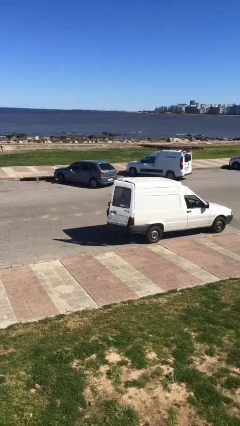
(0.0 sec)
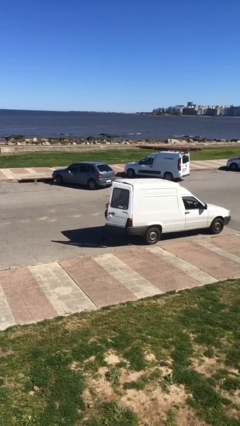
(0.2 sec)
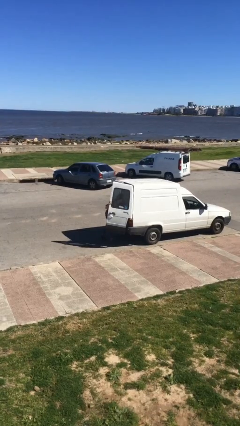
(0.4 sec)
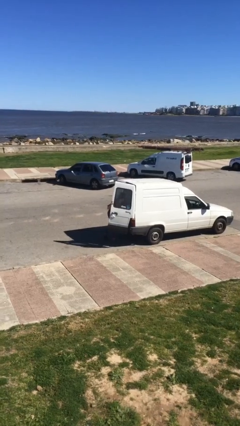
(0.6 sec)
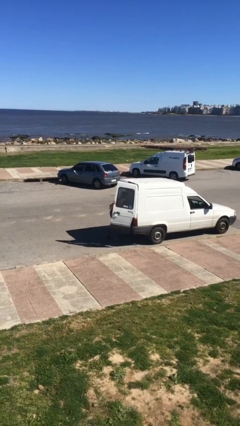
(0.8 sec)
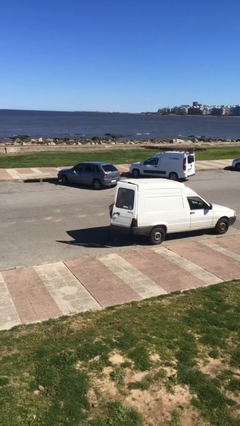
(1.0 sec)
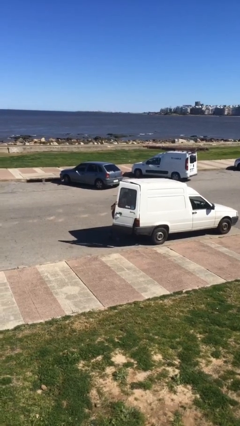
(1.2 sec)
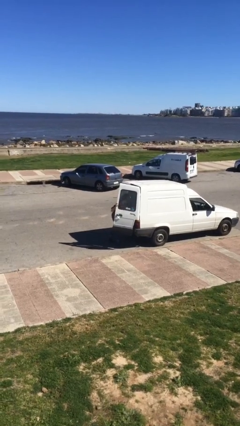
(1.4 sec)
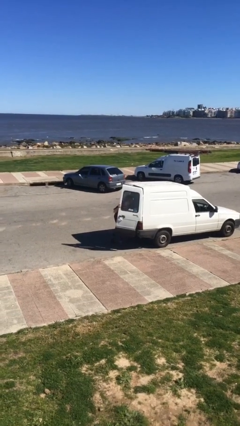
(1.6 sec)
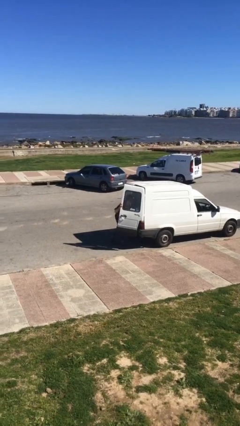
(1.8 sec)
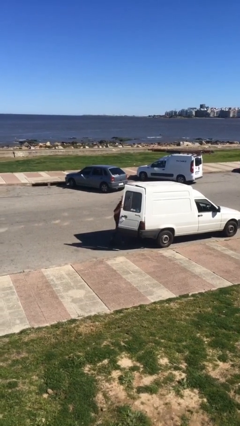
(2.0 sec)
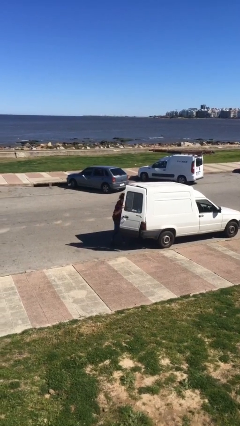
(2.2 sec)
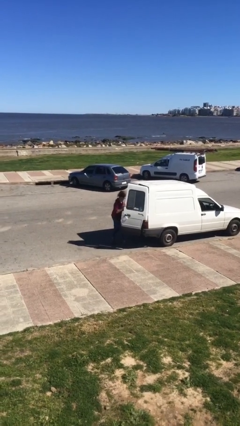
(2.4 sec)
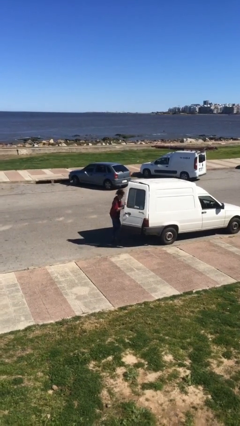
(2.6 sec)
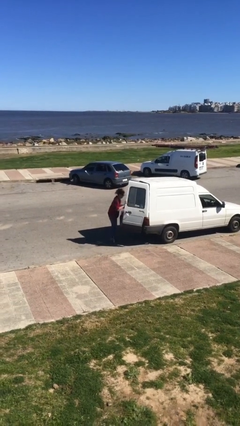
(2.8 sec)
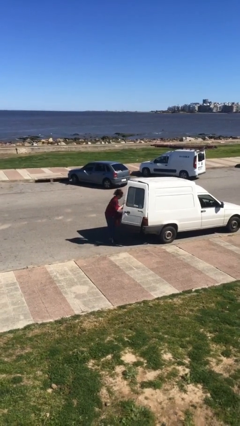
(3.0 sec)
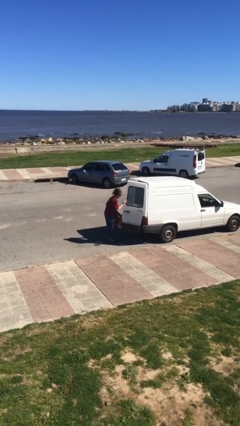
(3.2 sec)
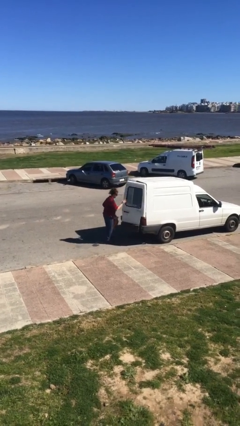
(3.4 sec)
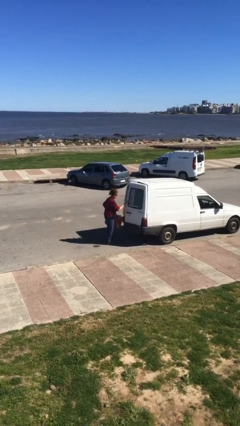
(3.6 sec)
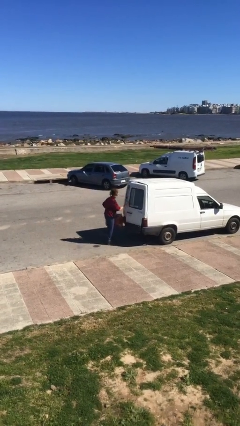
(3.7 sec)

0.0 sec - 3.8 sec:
person unloads car

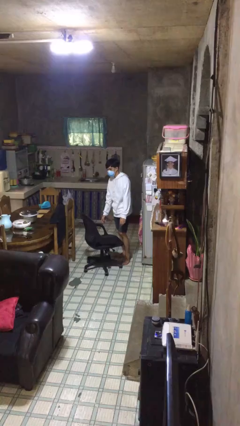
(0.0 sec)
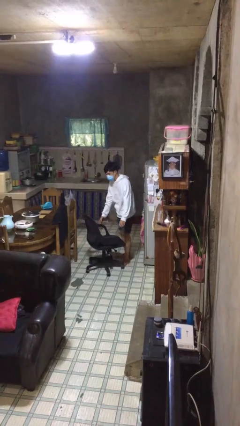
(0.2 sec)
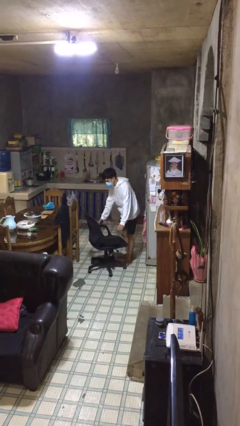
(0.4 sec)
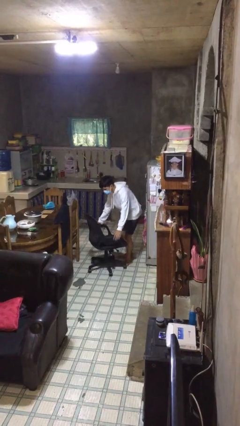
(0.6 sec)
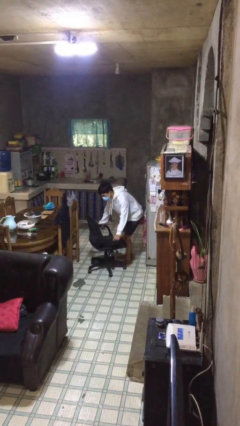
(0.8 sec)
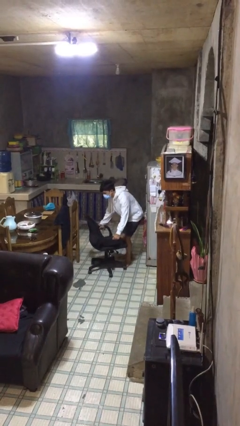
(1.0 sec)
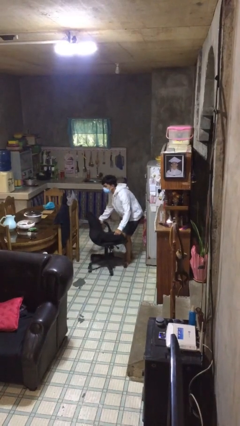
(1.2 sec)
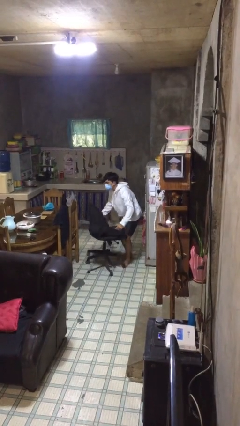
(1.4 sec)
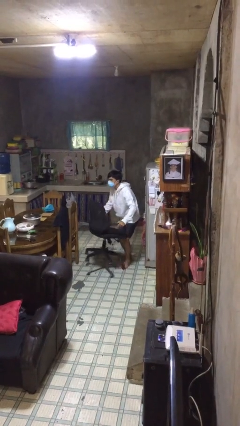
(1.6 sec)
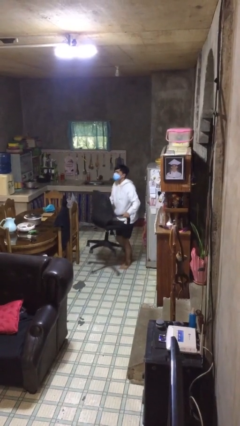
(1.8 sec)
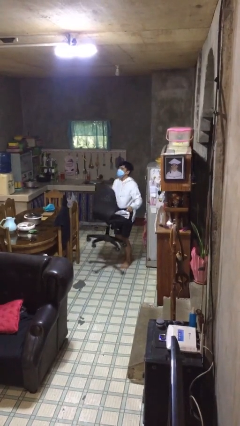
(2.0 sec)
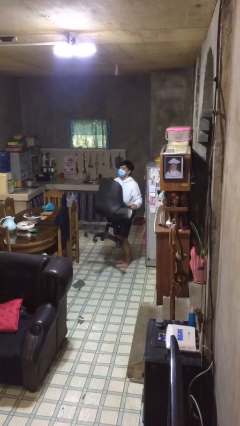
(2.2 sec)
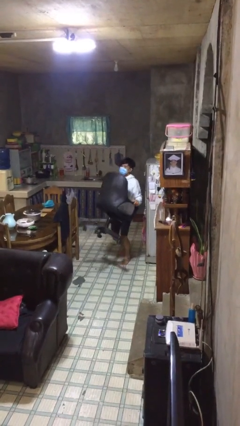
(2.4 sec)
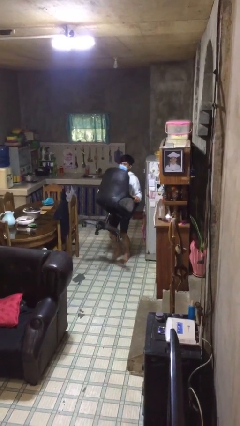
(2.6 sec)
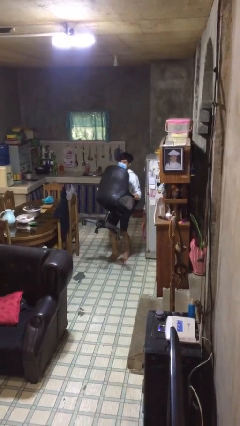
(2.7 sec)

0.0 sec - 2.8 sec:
person picks up object from floor

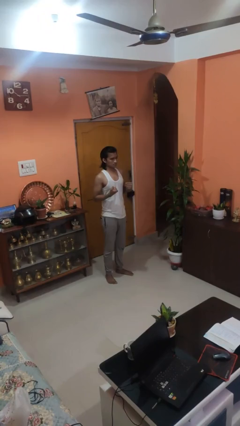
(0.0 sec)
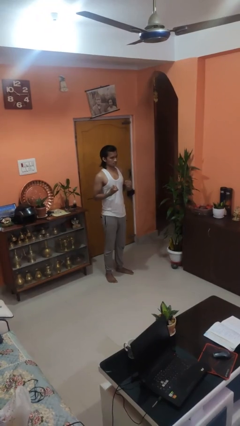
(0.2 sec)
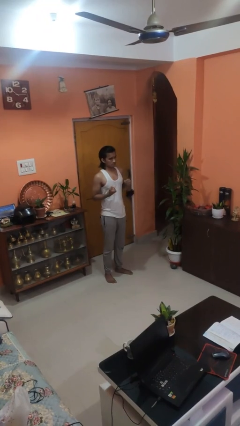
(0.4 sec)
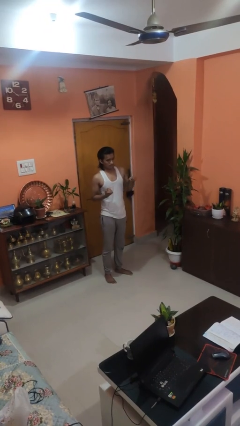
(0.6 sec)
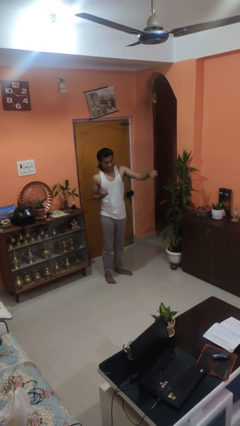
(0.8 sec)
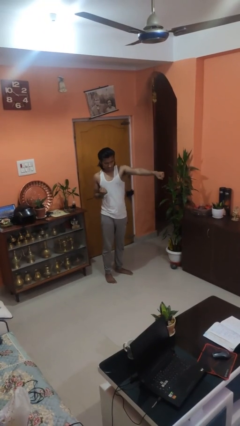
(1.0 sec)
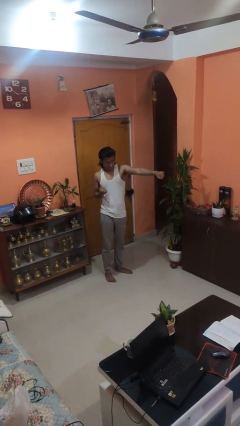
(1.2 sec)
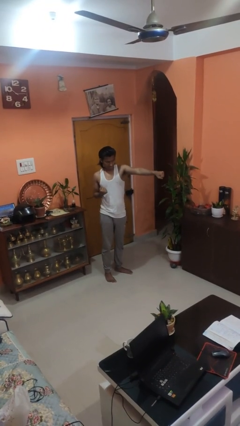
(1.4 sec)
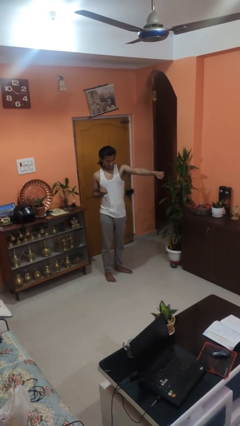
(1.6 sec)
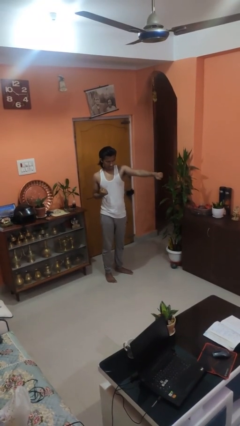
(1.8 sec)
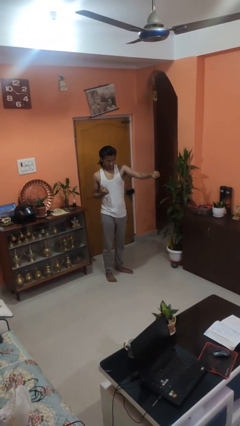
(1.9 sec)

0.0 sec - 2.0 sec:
person punches

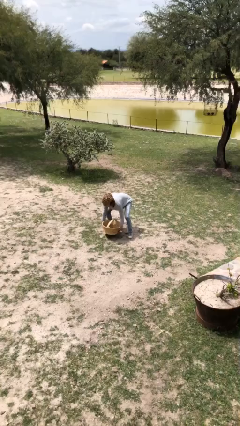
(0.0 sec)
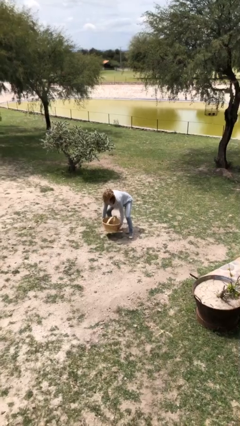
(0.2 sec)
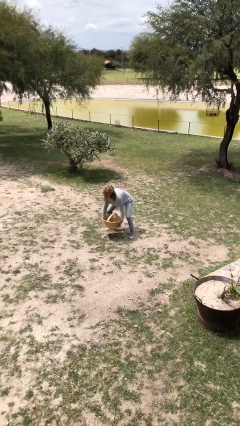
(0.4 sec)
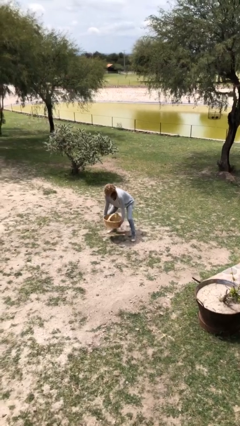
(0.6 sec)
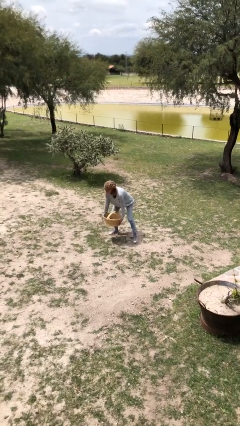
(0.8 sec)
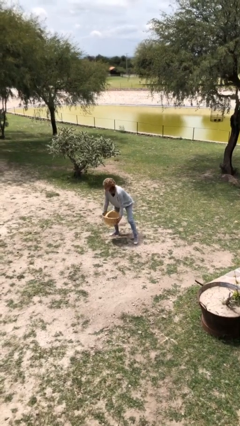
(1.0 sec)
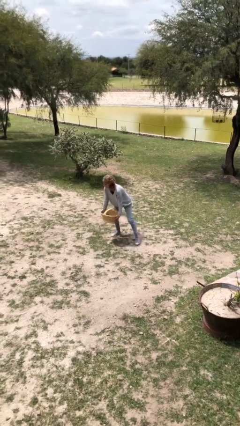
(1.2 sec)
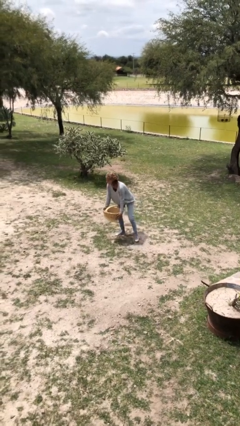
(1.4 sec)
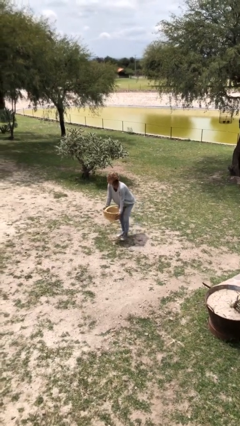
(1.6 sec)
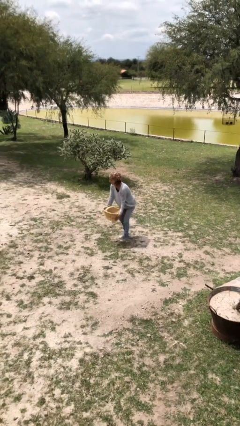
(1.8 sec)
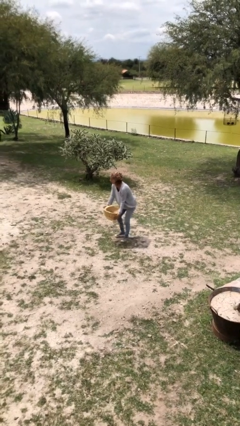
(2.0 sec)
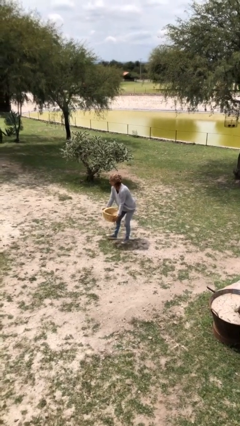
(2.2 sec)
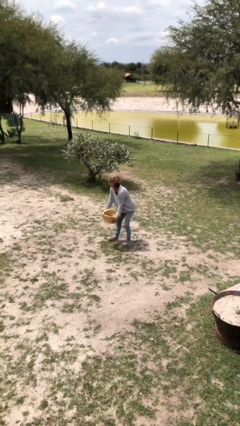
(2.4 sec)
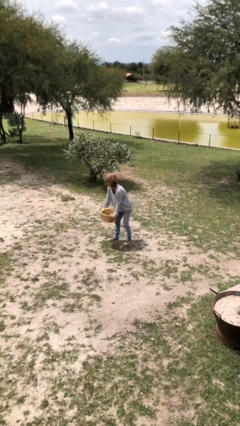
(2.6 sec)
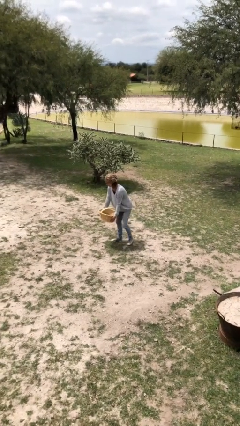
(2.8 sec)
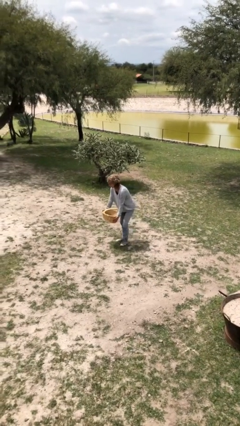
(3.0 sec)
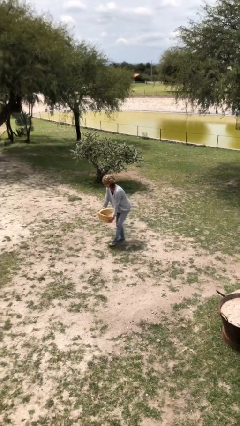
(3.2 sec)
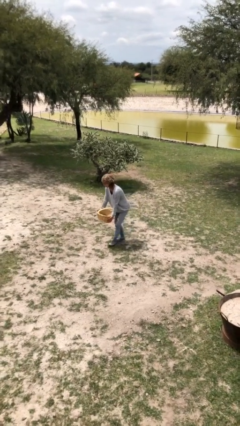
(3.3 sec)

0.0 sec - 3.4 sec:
person carries heavy object

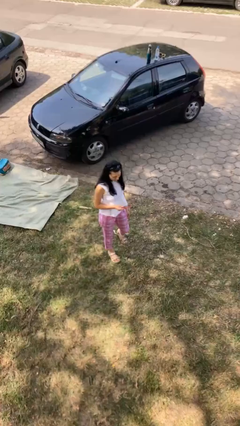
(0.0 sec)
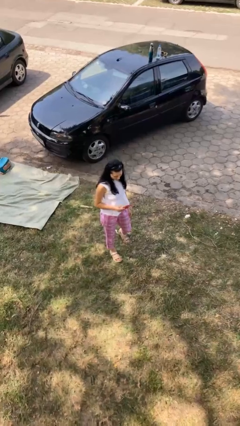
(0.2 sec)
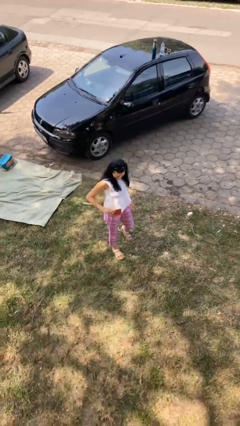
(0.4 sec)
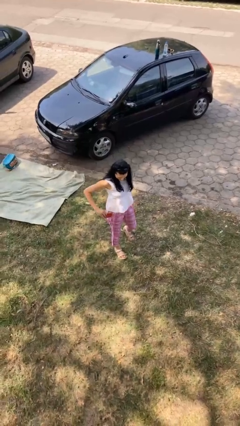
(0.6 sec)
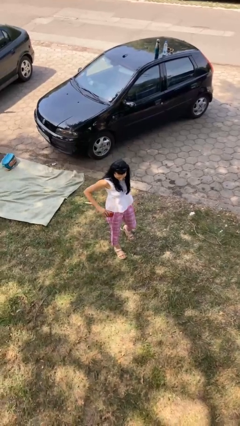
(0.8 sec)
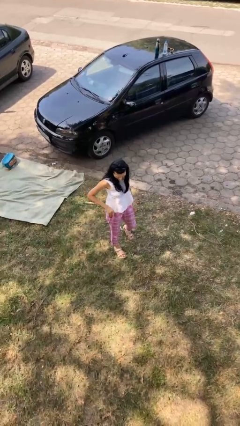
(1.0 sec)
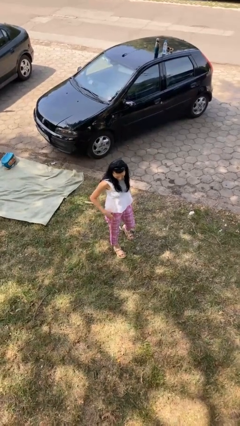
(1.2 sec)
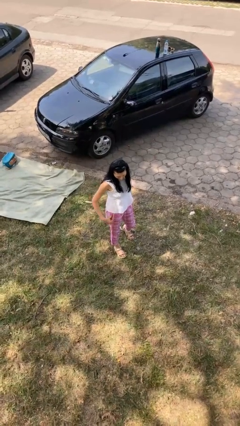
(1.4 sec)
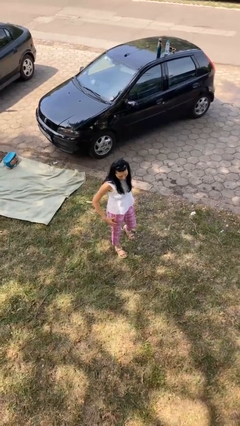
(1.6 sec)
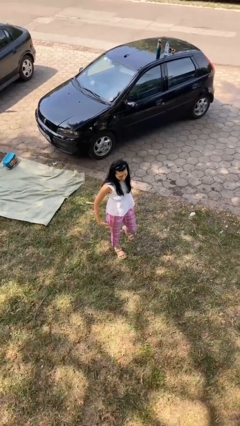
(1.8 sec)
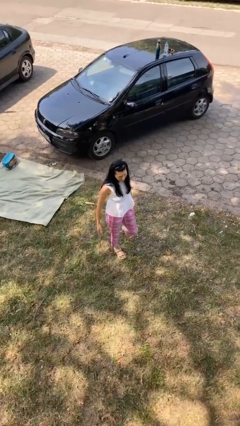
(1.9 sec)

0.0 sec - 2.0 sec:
person puts phone into pocket

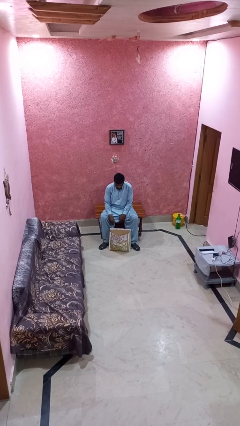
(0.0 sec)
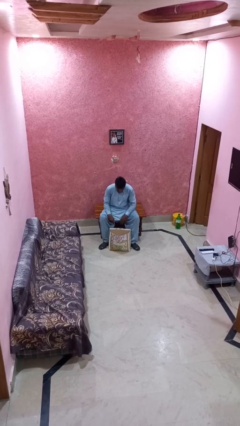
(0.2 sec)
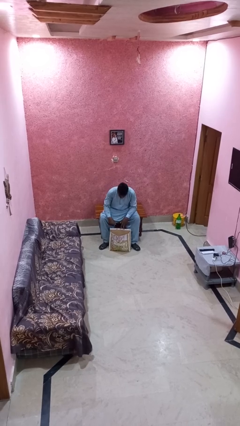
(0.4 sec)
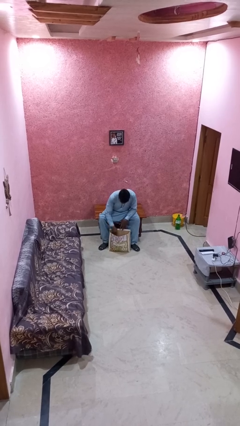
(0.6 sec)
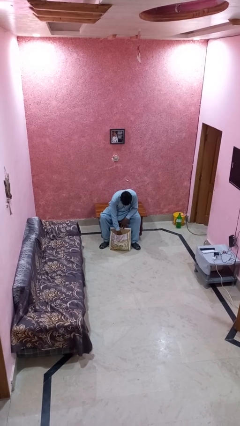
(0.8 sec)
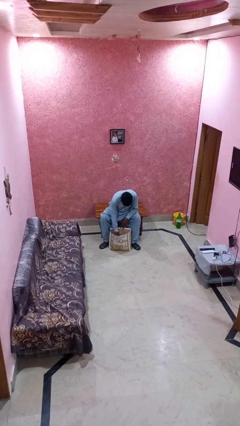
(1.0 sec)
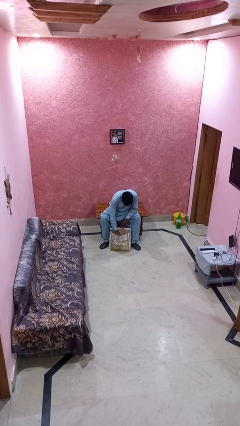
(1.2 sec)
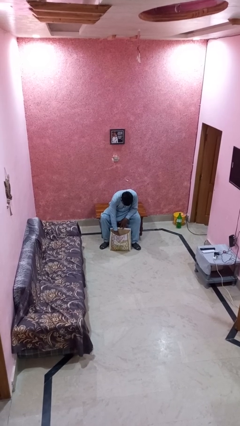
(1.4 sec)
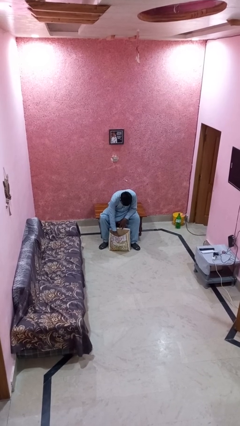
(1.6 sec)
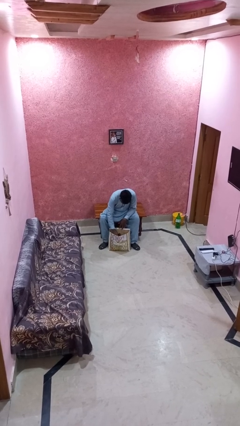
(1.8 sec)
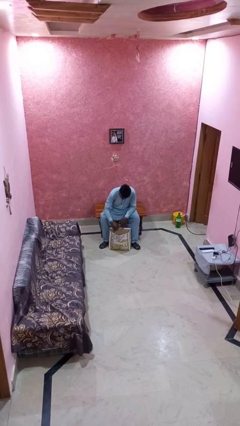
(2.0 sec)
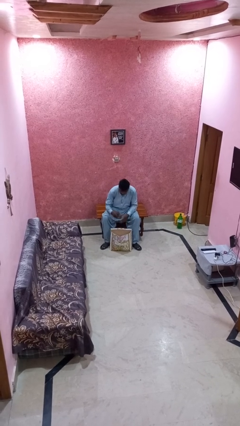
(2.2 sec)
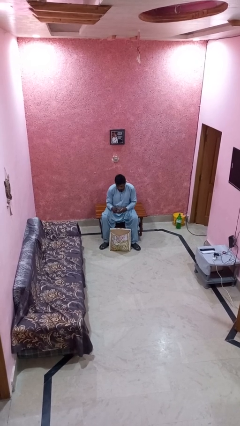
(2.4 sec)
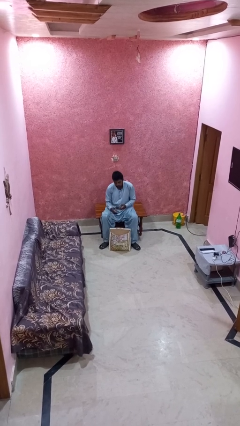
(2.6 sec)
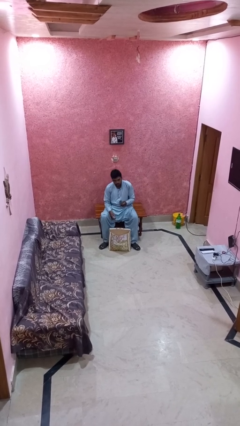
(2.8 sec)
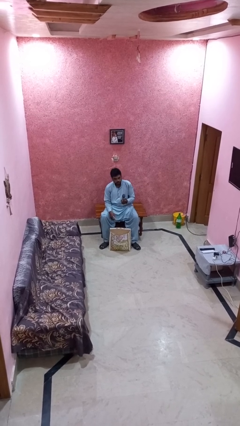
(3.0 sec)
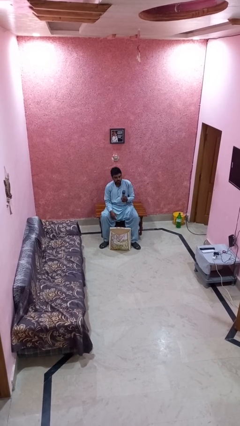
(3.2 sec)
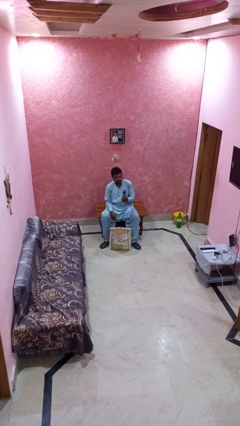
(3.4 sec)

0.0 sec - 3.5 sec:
person takes object from bag
